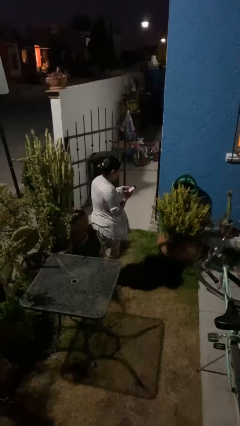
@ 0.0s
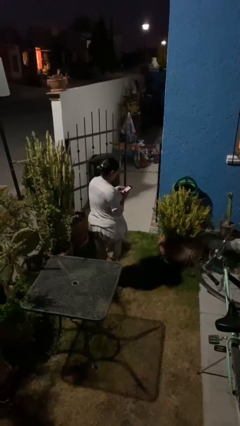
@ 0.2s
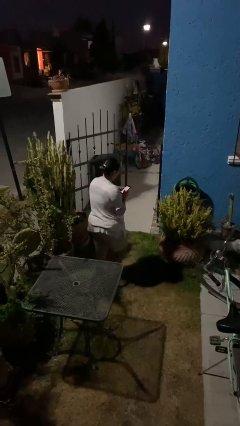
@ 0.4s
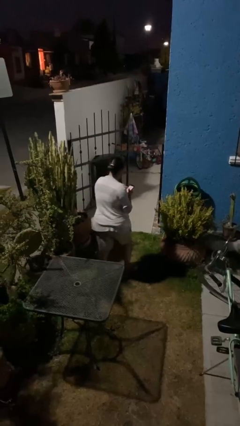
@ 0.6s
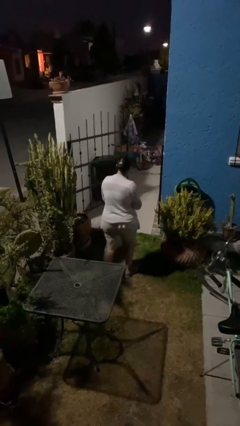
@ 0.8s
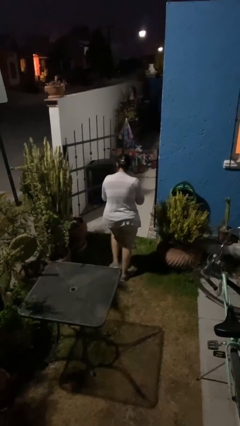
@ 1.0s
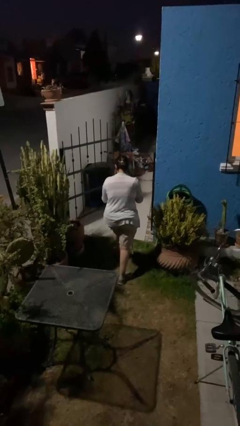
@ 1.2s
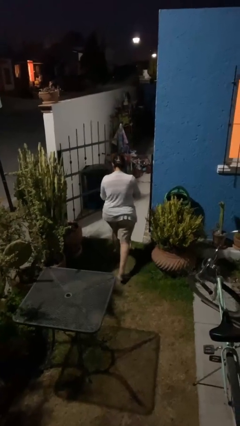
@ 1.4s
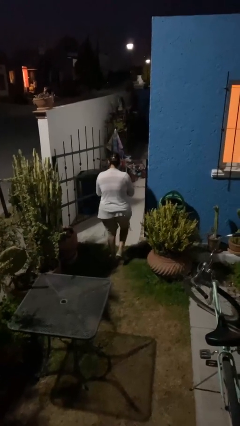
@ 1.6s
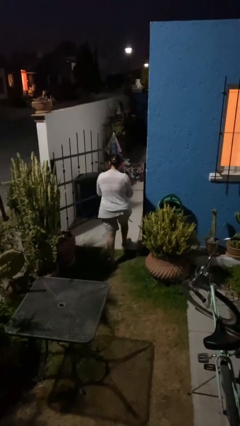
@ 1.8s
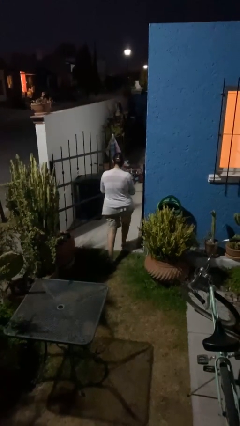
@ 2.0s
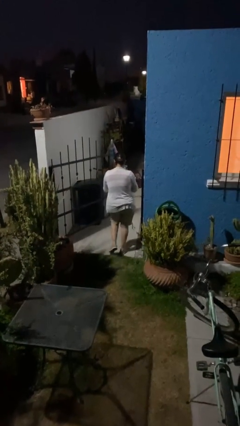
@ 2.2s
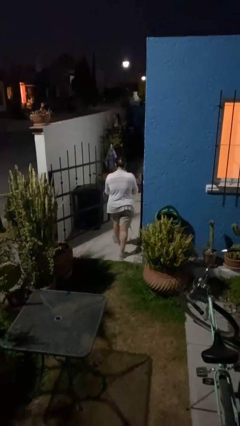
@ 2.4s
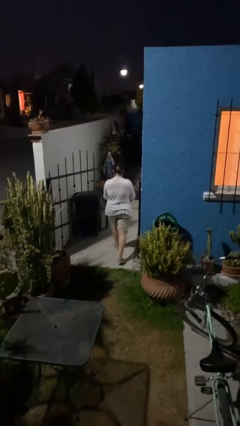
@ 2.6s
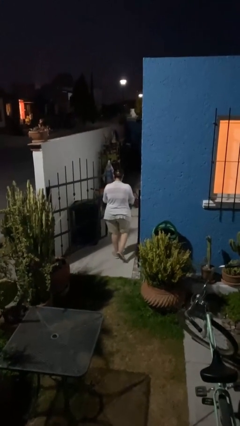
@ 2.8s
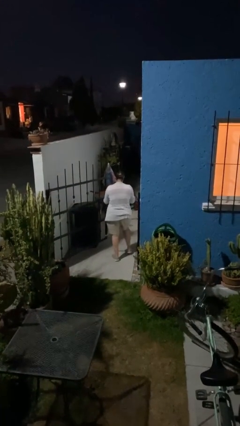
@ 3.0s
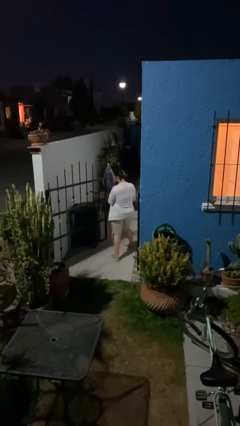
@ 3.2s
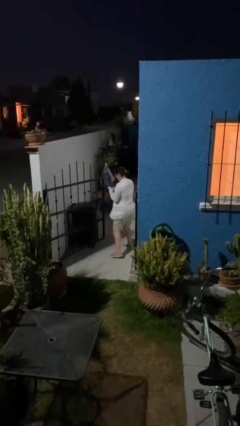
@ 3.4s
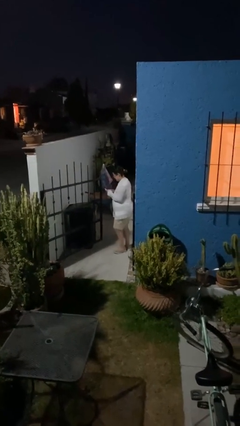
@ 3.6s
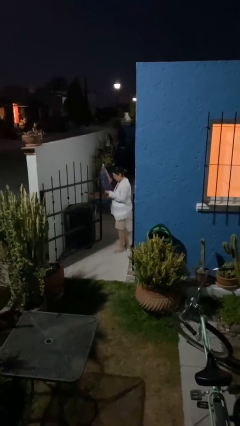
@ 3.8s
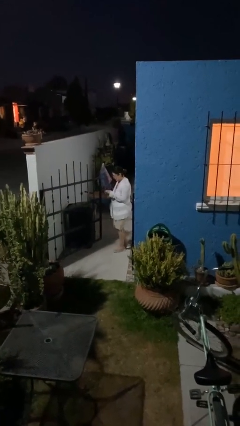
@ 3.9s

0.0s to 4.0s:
person exits scene through structure

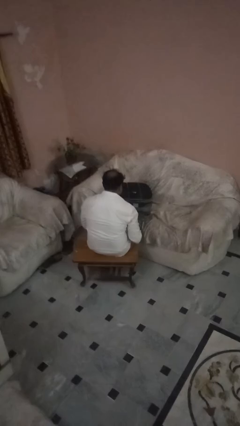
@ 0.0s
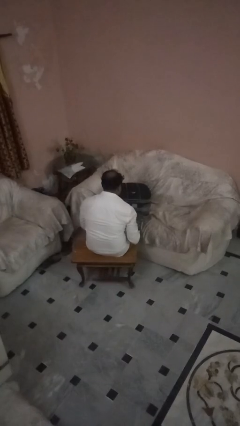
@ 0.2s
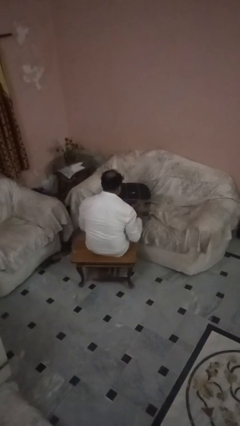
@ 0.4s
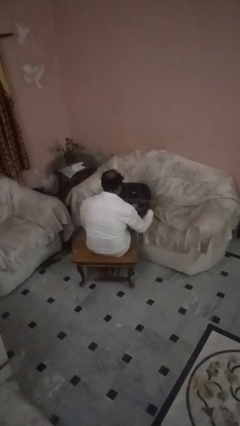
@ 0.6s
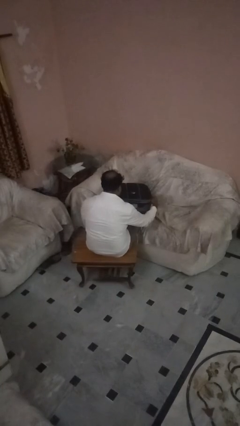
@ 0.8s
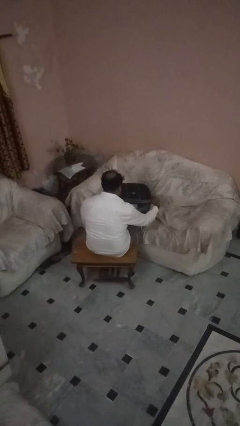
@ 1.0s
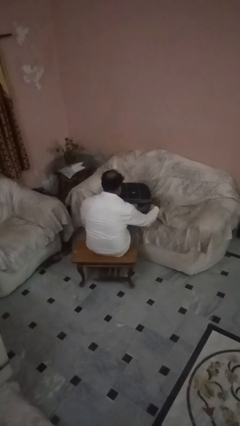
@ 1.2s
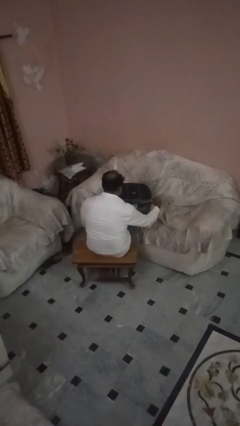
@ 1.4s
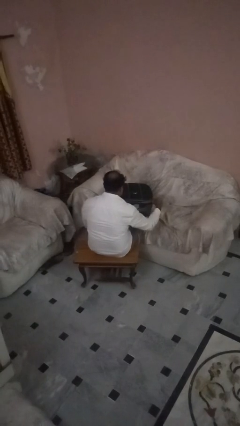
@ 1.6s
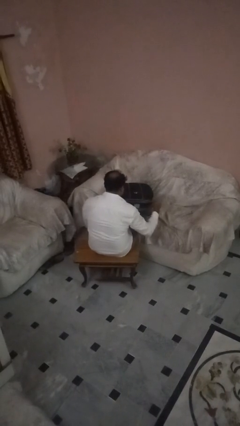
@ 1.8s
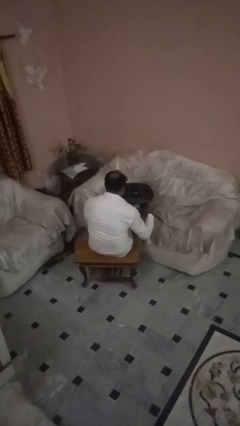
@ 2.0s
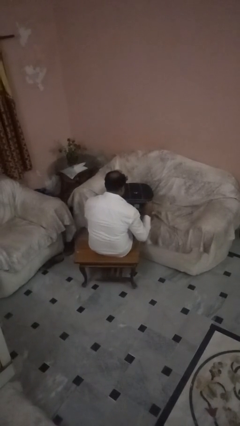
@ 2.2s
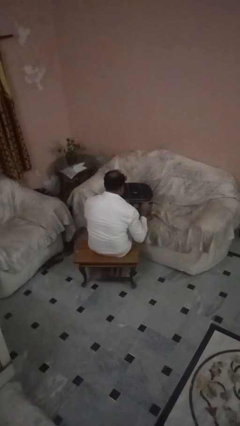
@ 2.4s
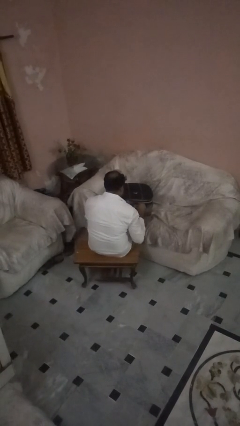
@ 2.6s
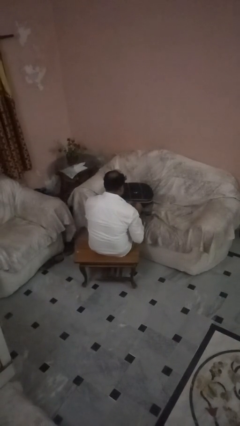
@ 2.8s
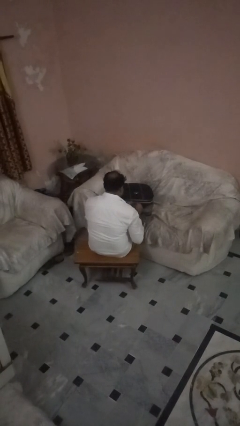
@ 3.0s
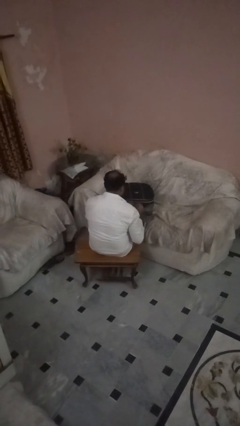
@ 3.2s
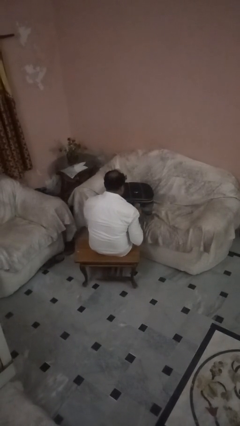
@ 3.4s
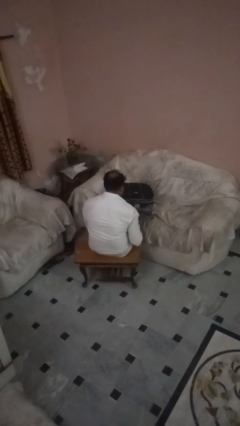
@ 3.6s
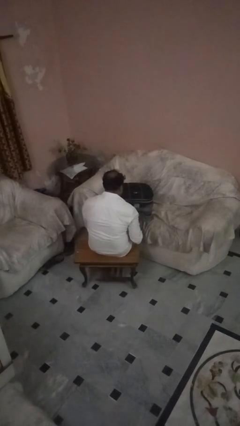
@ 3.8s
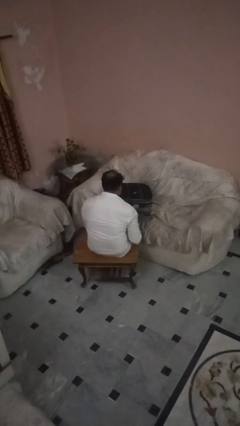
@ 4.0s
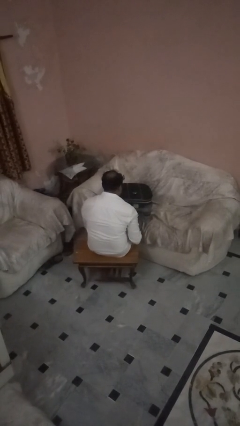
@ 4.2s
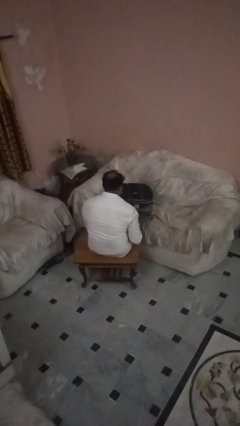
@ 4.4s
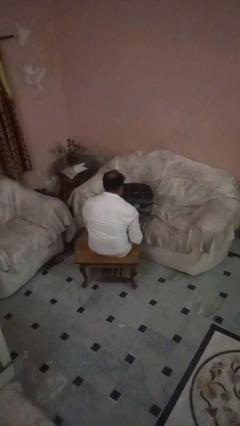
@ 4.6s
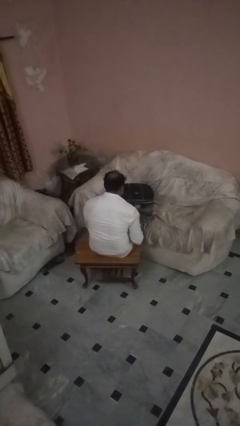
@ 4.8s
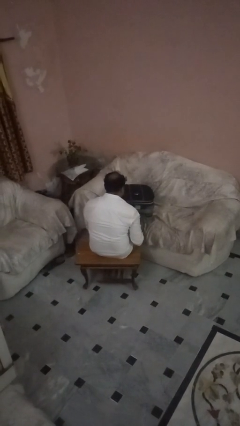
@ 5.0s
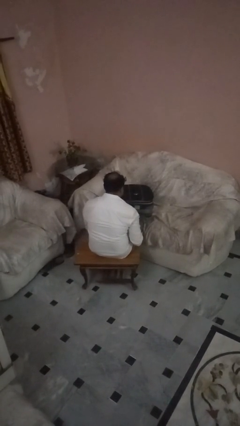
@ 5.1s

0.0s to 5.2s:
person closes suitcase

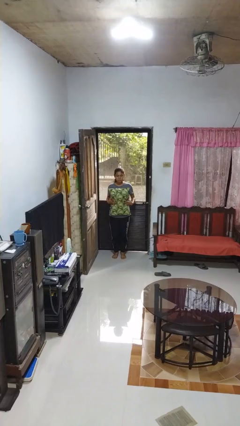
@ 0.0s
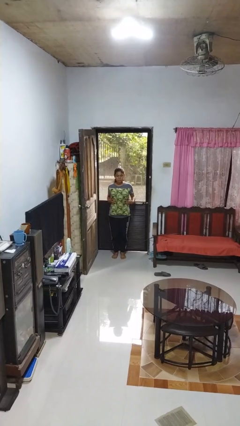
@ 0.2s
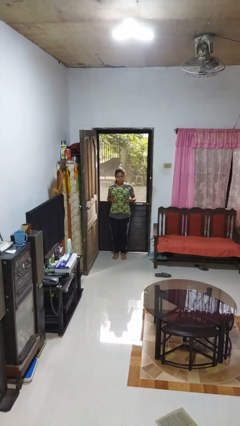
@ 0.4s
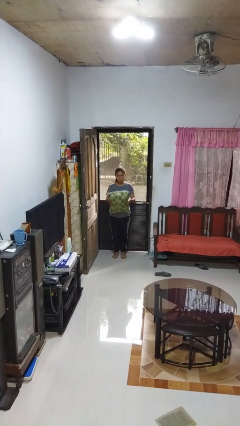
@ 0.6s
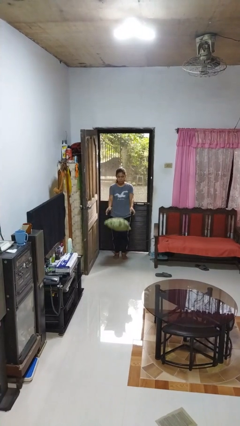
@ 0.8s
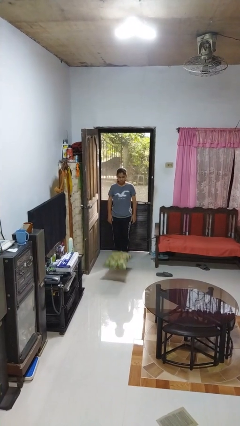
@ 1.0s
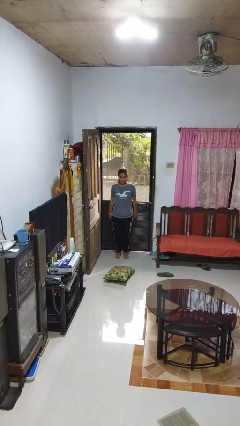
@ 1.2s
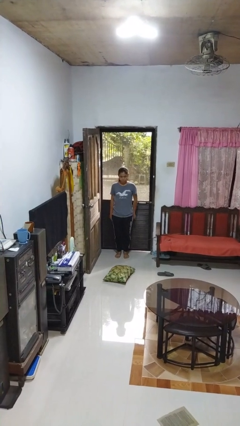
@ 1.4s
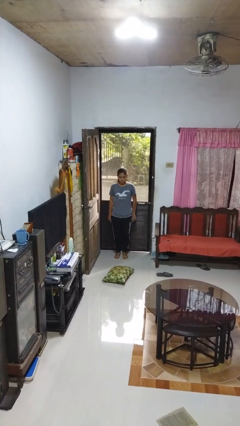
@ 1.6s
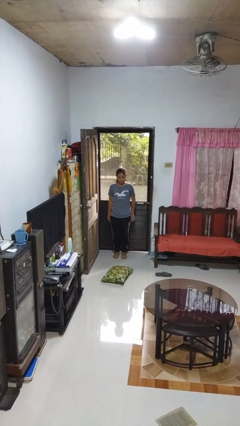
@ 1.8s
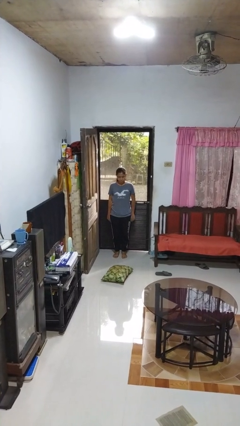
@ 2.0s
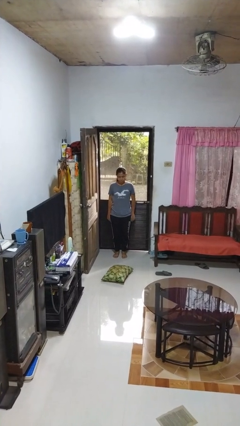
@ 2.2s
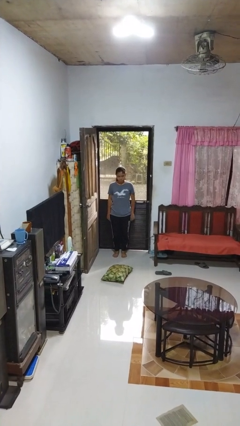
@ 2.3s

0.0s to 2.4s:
person throws object into air

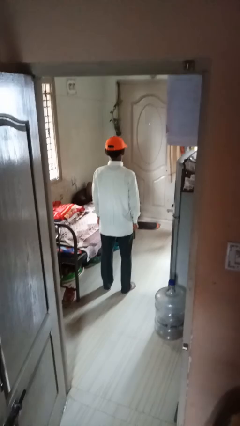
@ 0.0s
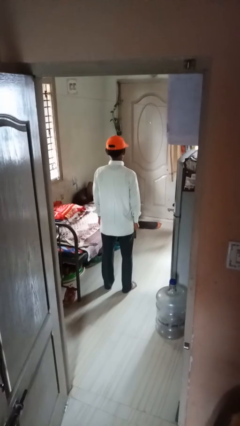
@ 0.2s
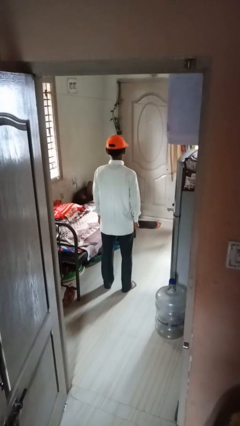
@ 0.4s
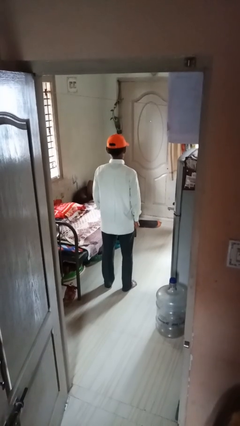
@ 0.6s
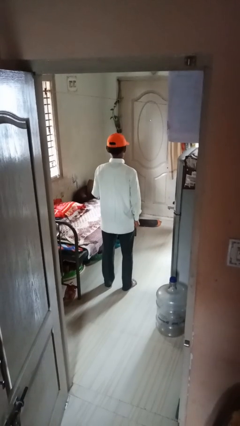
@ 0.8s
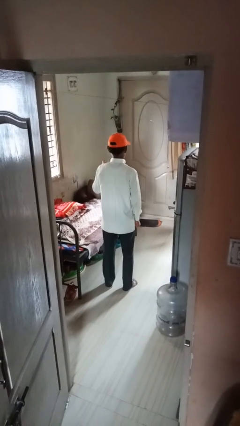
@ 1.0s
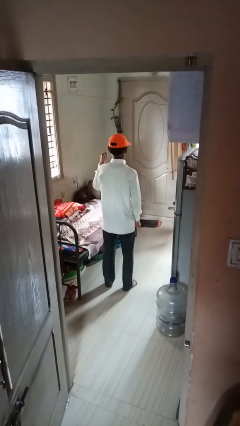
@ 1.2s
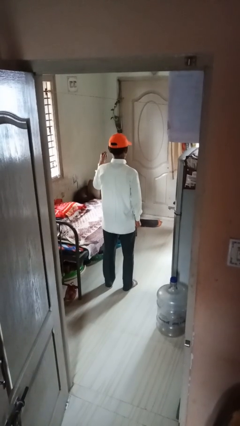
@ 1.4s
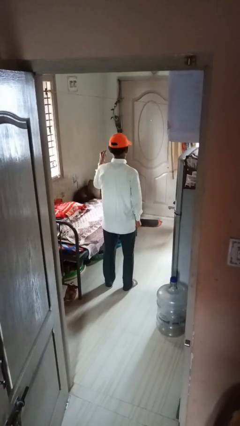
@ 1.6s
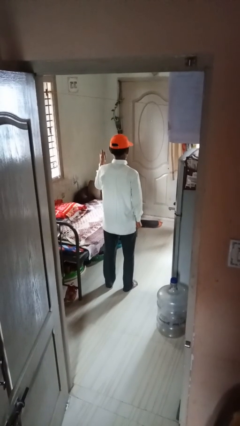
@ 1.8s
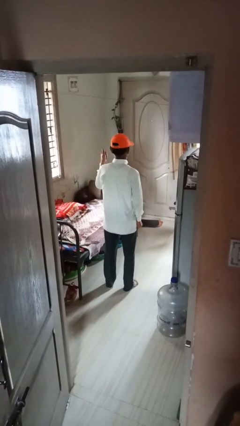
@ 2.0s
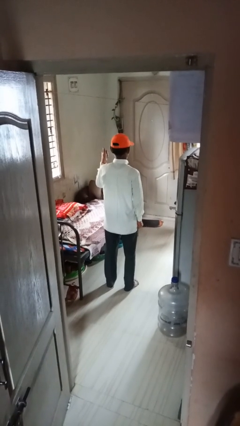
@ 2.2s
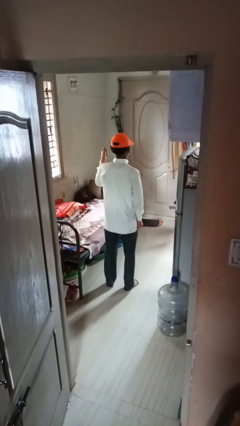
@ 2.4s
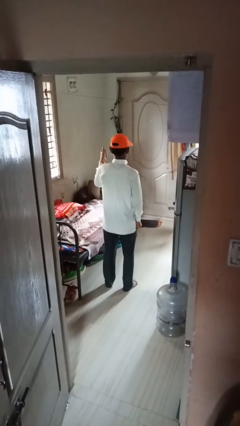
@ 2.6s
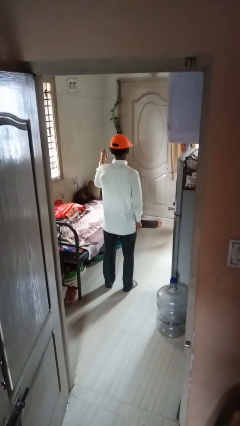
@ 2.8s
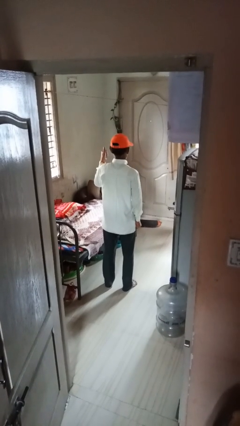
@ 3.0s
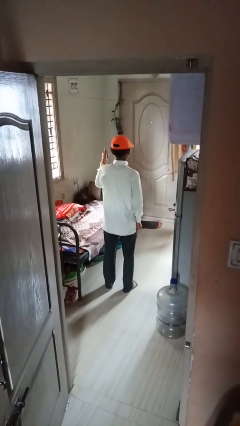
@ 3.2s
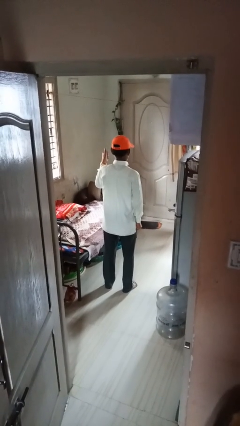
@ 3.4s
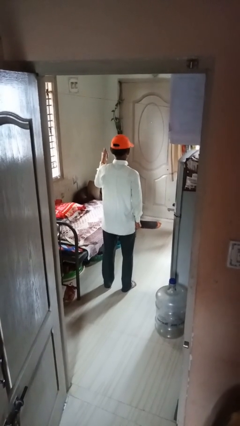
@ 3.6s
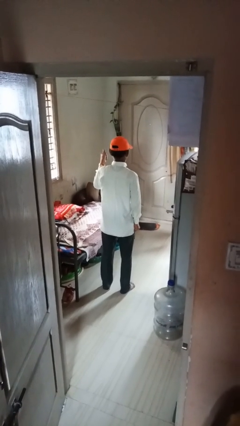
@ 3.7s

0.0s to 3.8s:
person gestures thumbs up

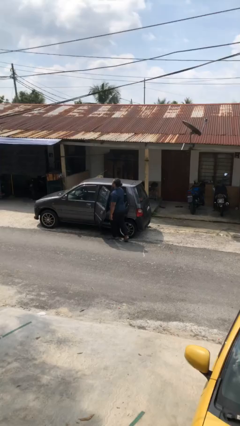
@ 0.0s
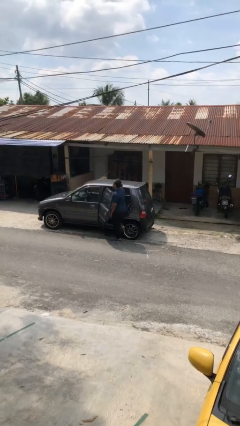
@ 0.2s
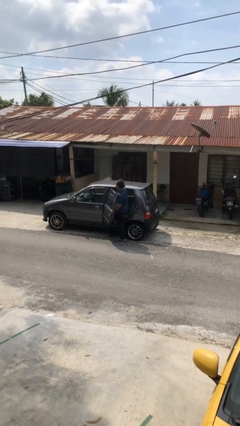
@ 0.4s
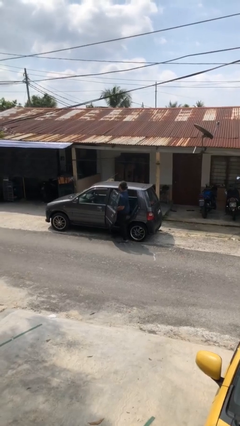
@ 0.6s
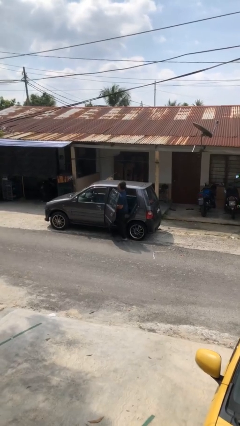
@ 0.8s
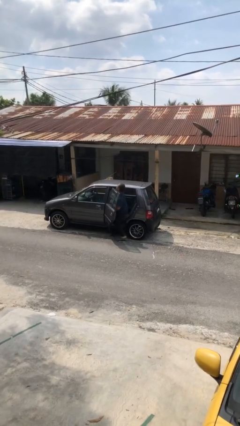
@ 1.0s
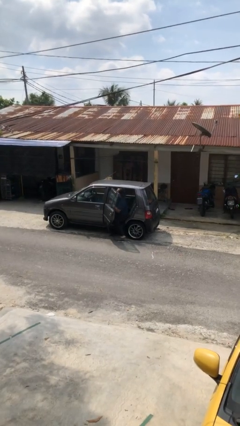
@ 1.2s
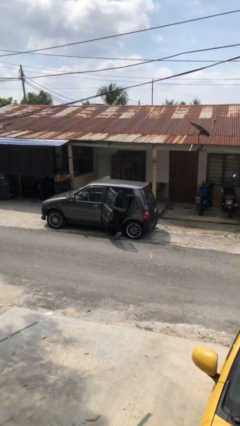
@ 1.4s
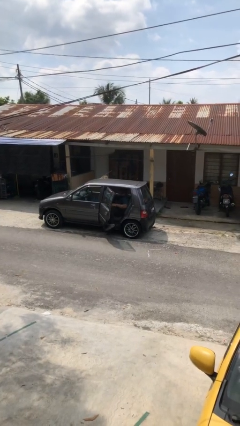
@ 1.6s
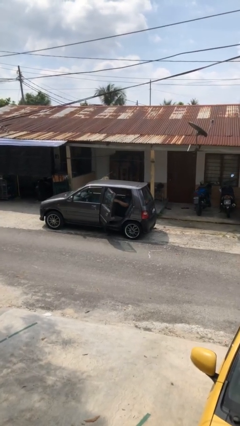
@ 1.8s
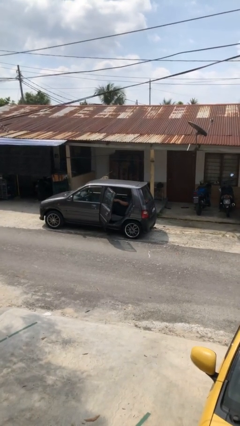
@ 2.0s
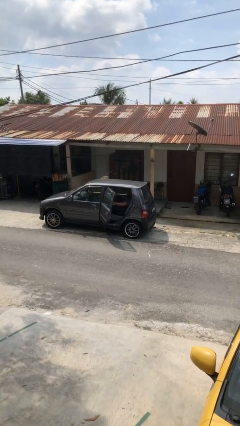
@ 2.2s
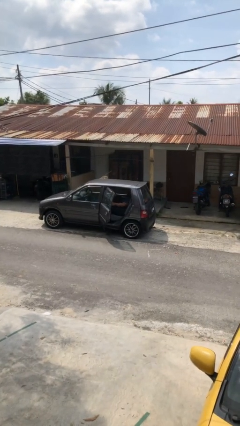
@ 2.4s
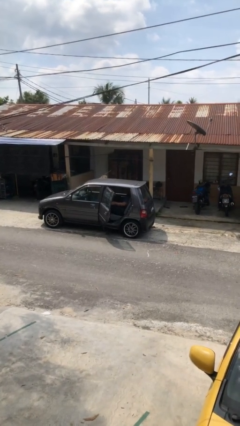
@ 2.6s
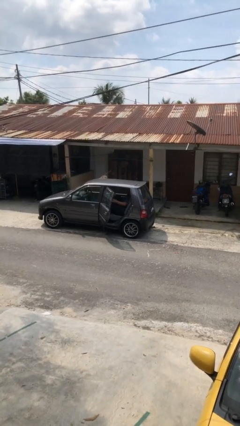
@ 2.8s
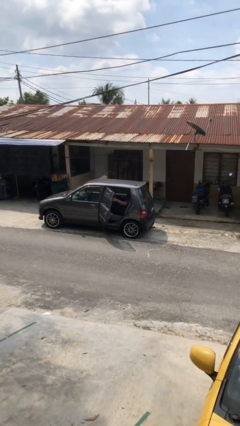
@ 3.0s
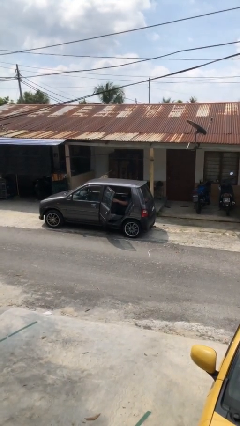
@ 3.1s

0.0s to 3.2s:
person enters car
